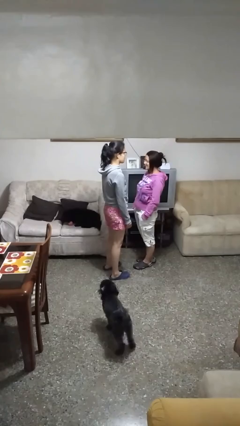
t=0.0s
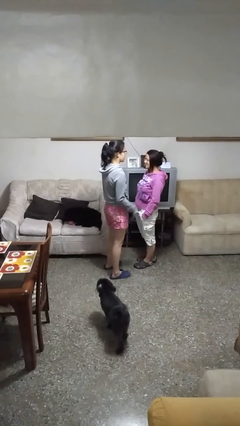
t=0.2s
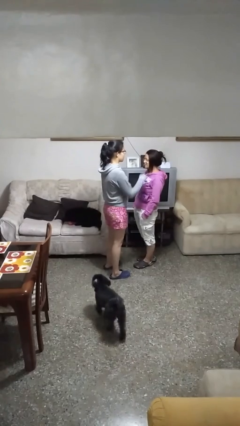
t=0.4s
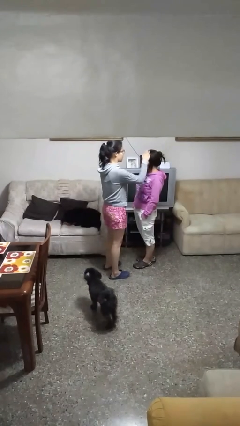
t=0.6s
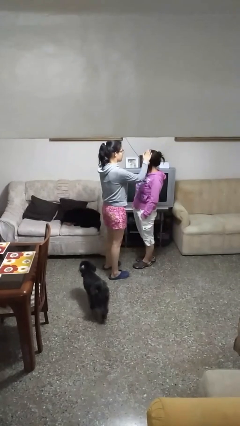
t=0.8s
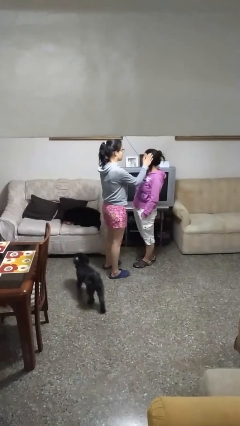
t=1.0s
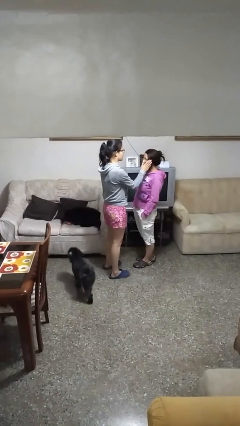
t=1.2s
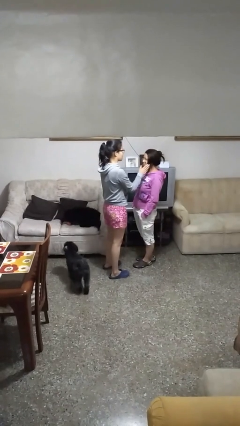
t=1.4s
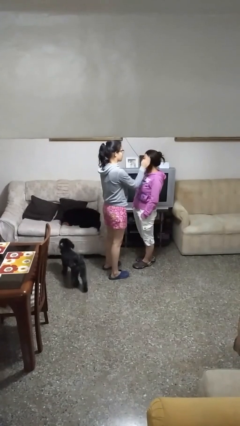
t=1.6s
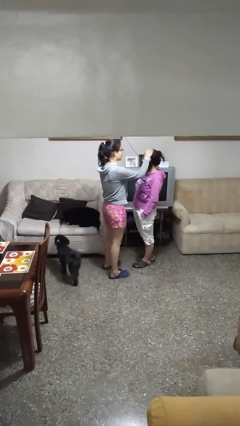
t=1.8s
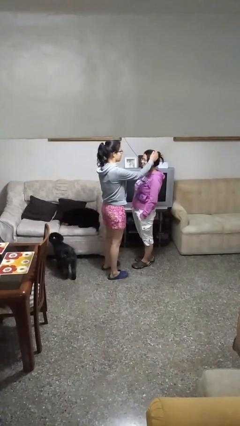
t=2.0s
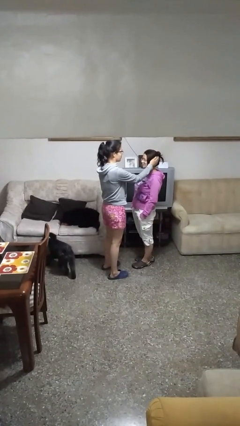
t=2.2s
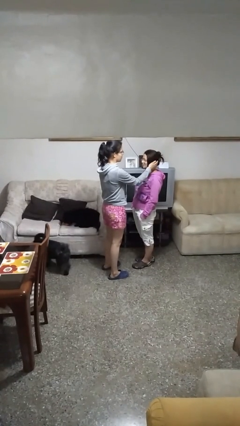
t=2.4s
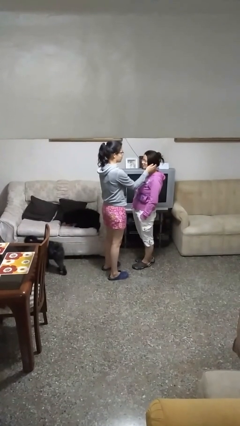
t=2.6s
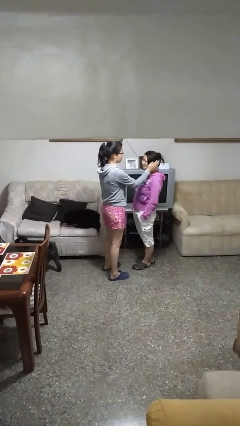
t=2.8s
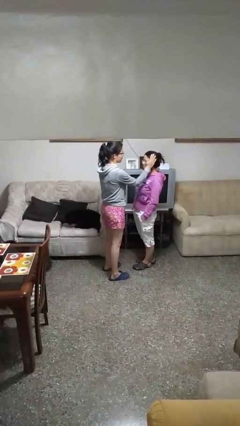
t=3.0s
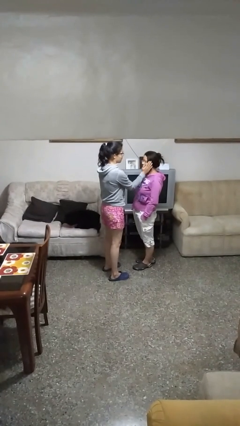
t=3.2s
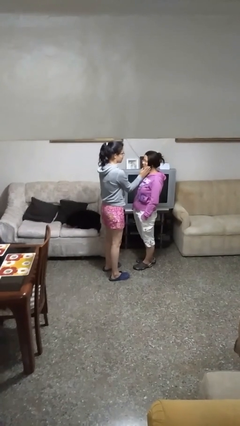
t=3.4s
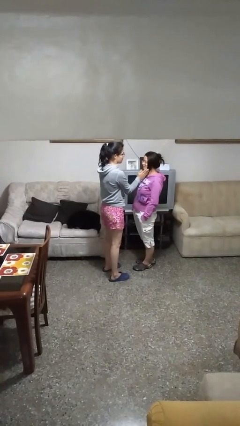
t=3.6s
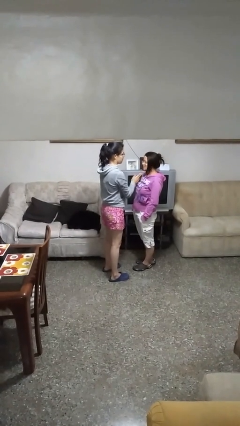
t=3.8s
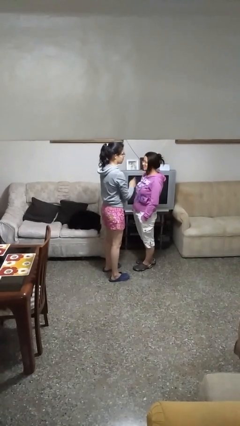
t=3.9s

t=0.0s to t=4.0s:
person touches face of person

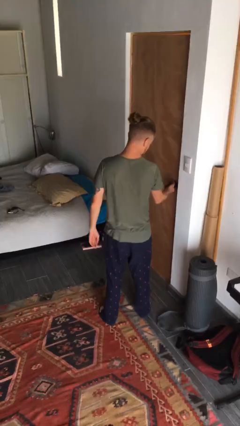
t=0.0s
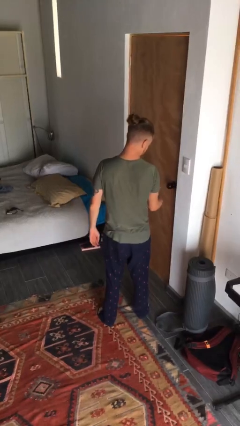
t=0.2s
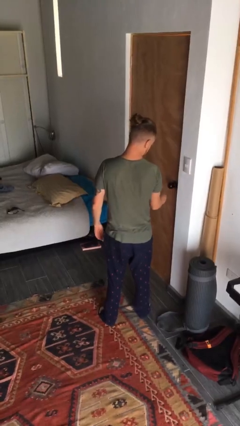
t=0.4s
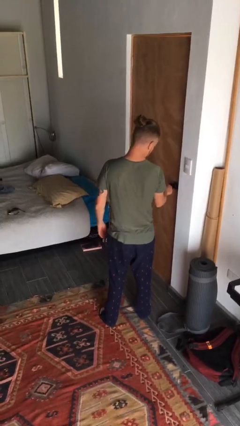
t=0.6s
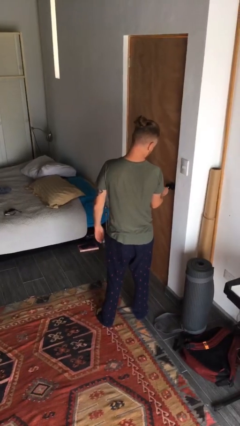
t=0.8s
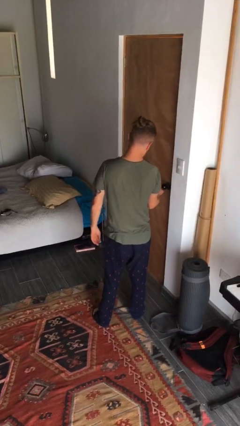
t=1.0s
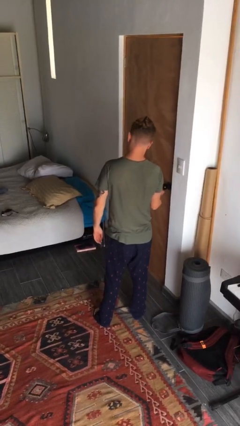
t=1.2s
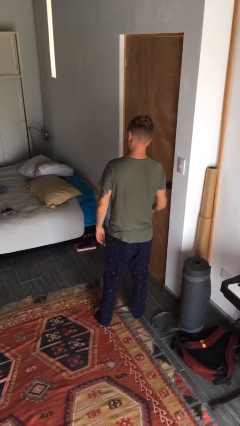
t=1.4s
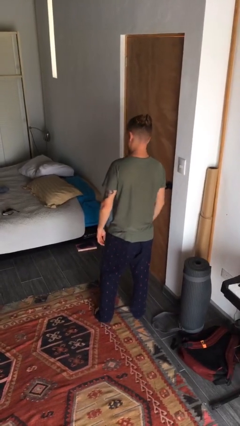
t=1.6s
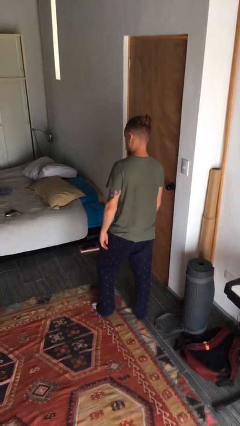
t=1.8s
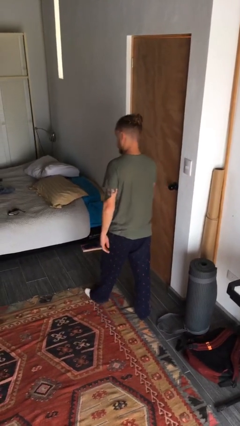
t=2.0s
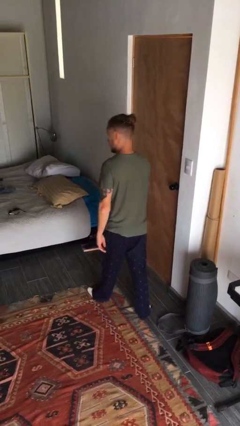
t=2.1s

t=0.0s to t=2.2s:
person locks door with keys

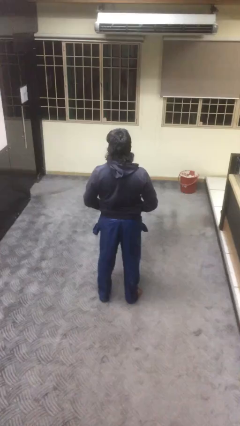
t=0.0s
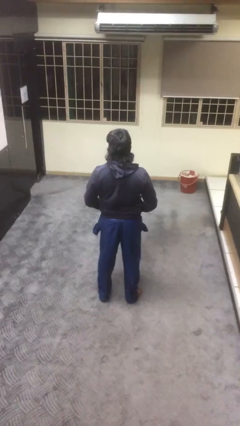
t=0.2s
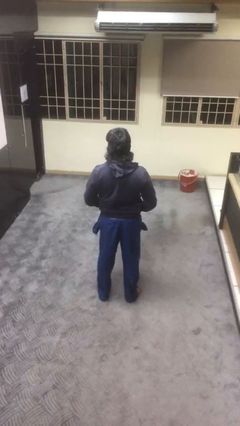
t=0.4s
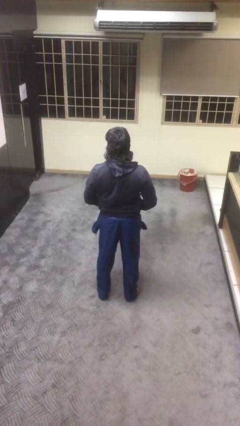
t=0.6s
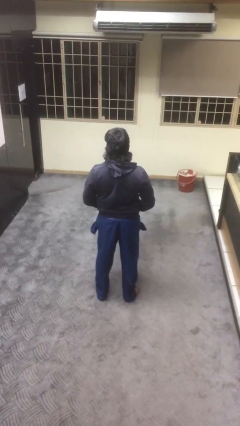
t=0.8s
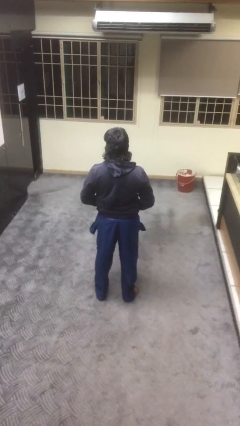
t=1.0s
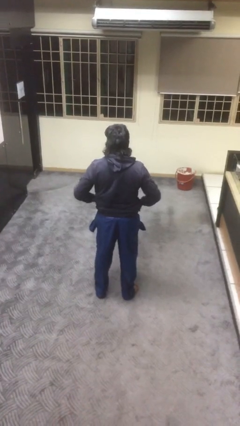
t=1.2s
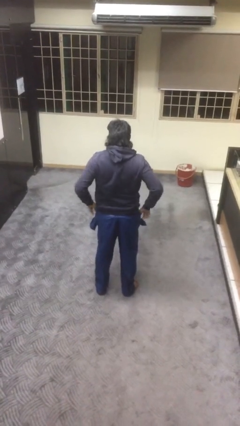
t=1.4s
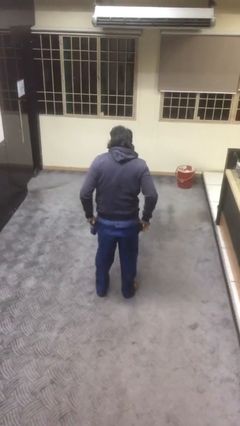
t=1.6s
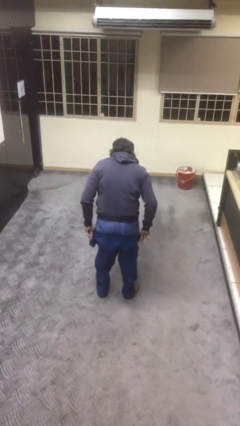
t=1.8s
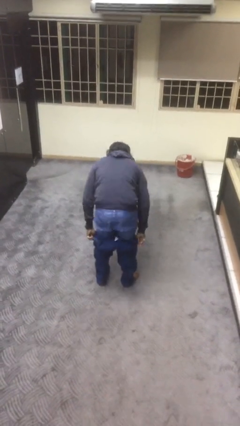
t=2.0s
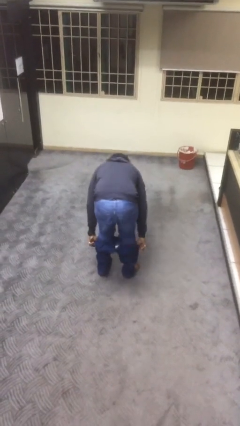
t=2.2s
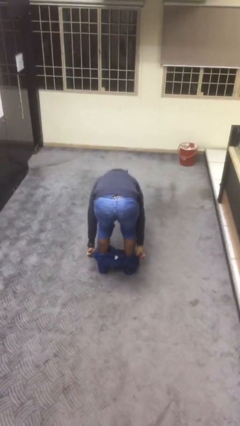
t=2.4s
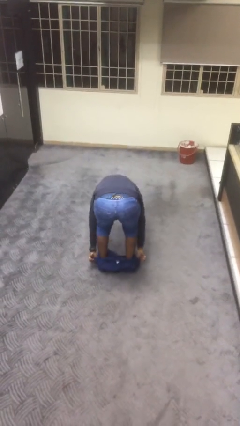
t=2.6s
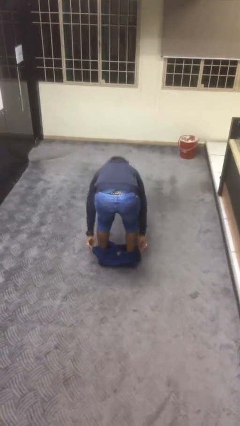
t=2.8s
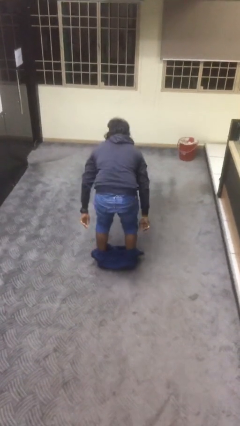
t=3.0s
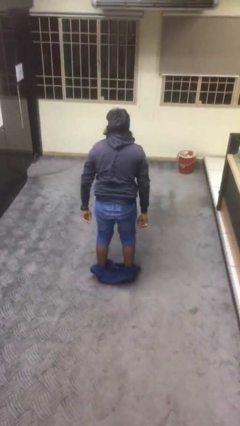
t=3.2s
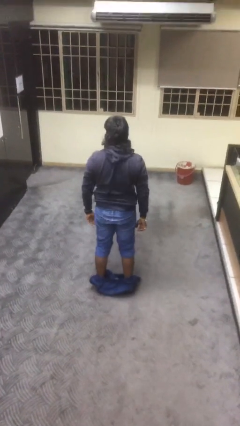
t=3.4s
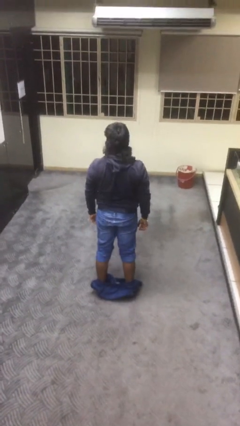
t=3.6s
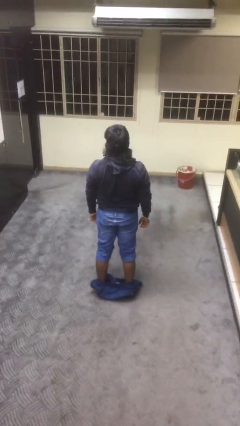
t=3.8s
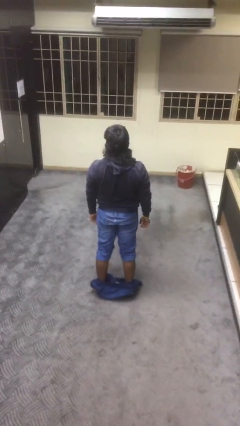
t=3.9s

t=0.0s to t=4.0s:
person takes off pants

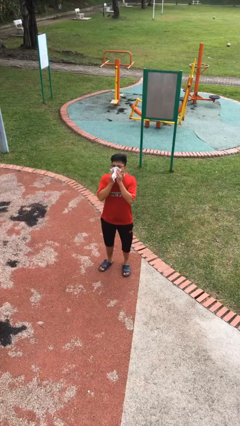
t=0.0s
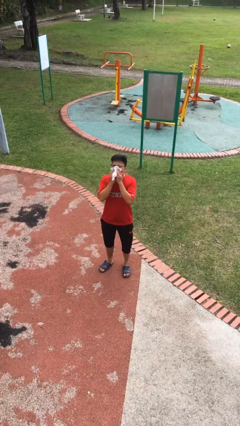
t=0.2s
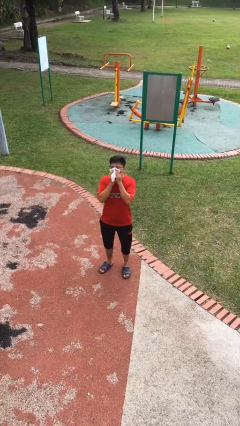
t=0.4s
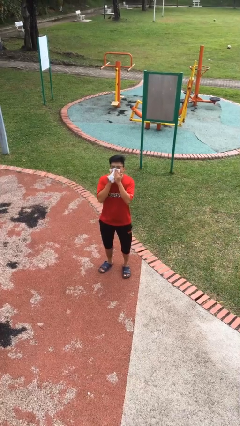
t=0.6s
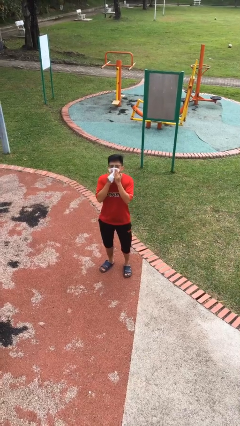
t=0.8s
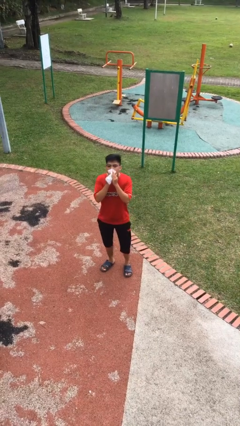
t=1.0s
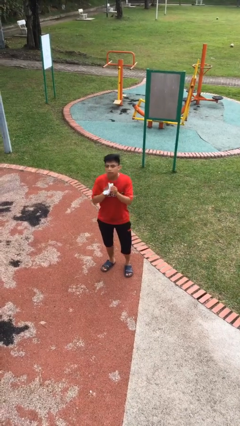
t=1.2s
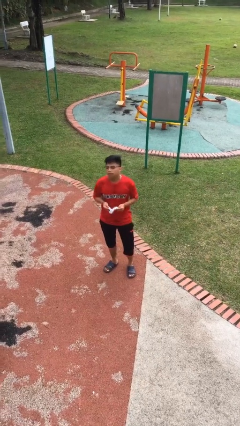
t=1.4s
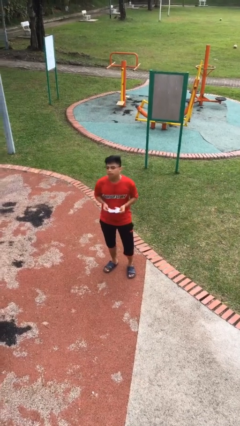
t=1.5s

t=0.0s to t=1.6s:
person blows nose

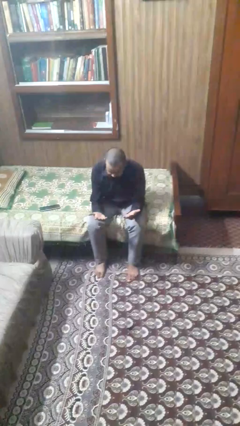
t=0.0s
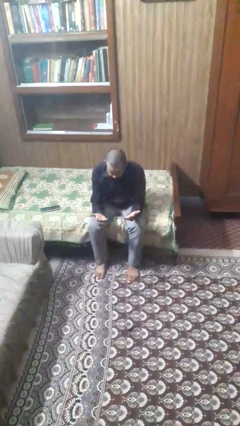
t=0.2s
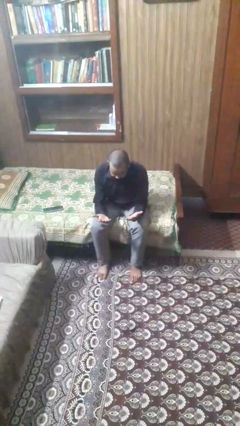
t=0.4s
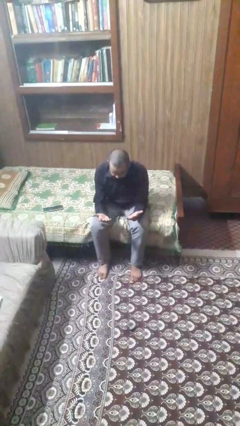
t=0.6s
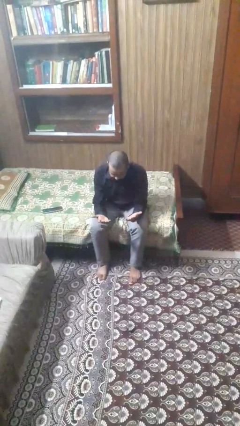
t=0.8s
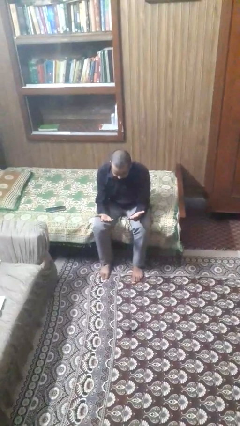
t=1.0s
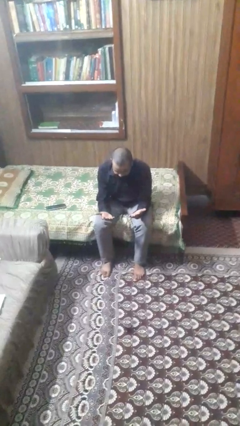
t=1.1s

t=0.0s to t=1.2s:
person looks at hands in lap

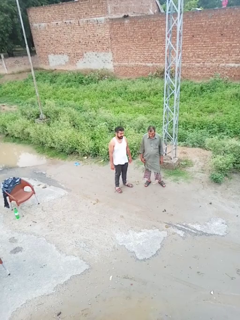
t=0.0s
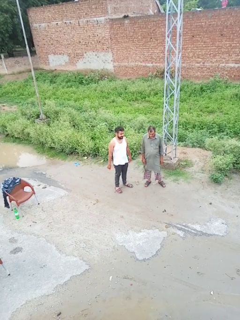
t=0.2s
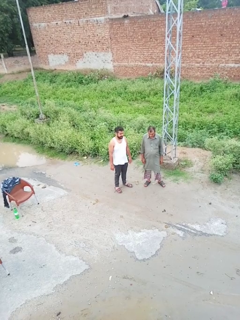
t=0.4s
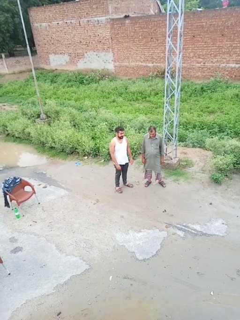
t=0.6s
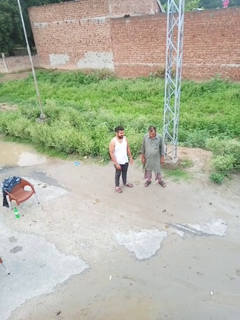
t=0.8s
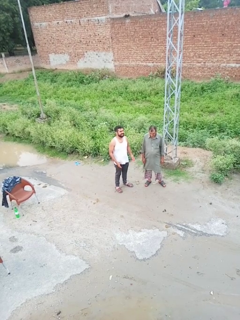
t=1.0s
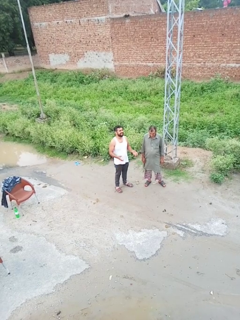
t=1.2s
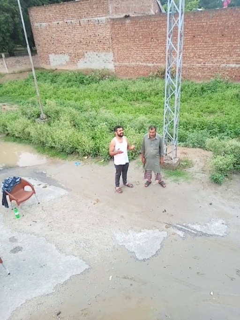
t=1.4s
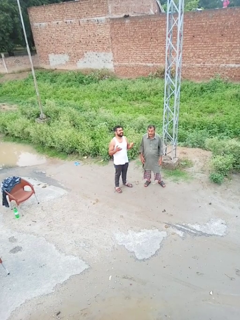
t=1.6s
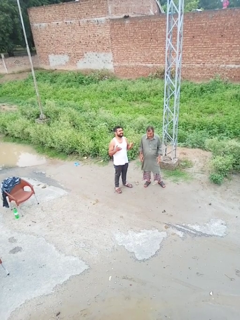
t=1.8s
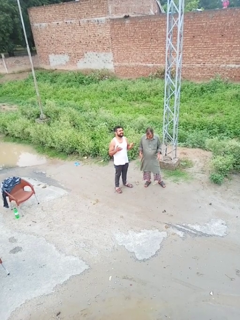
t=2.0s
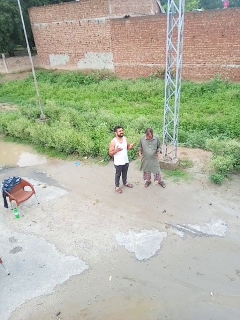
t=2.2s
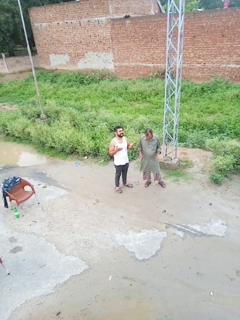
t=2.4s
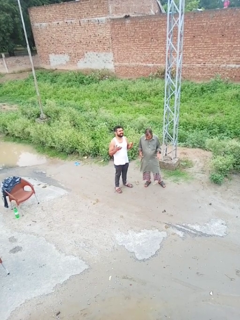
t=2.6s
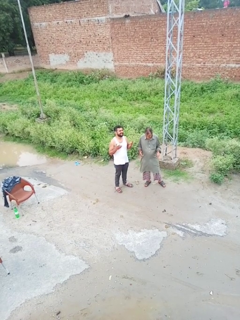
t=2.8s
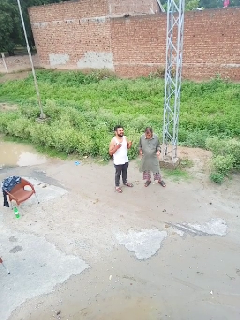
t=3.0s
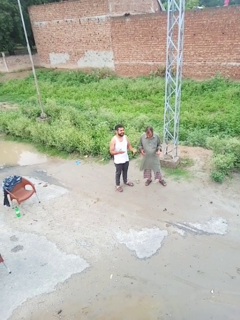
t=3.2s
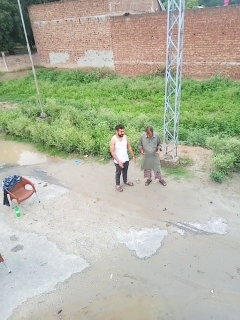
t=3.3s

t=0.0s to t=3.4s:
person laughs with person

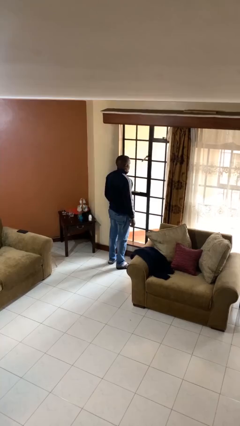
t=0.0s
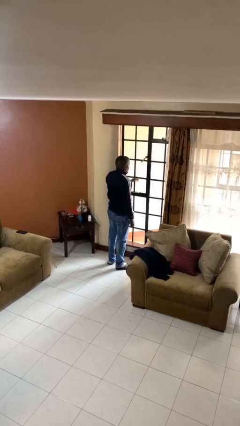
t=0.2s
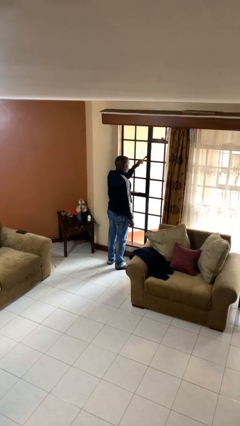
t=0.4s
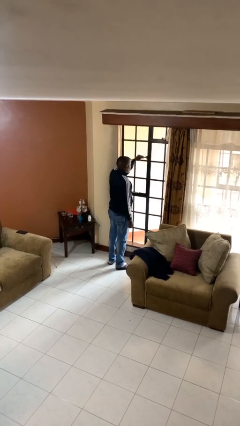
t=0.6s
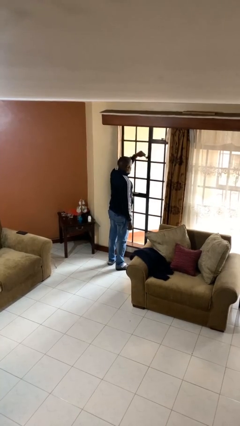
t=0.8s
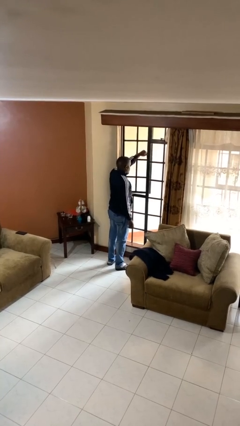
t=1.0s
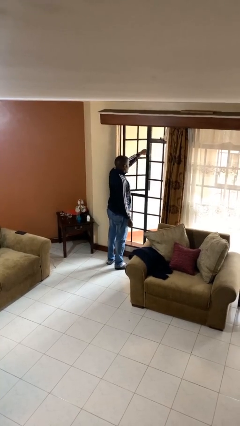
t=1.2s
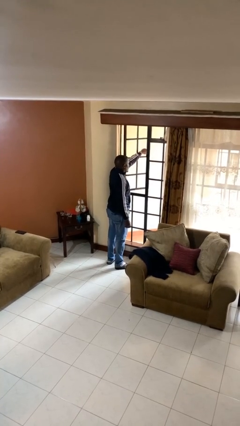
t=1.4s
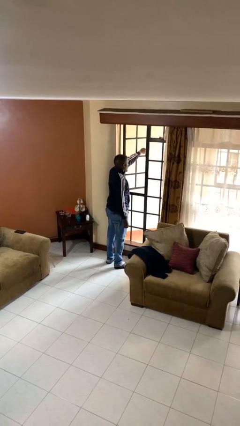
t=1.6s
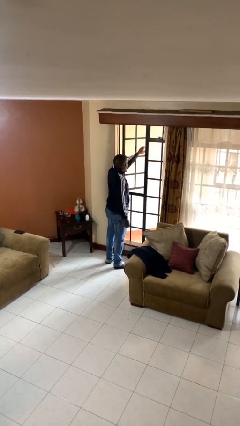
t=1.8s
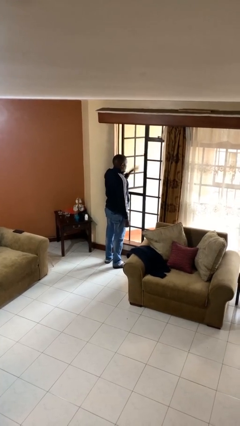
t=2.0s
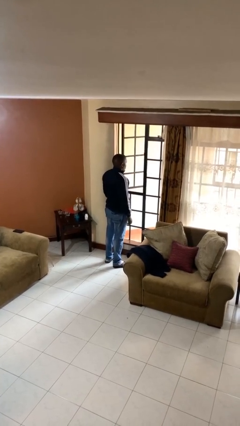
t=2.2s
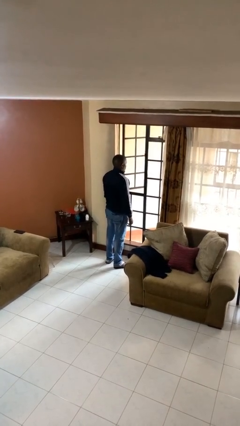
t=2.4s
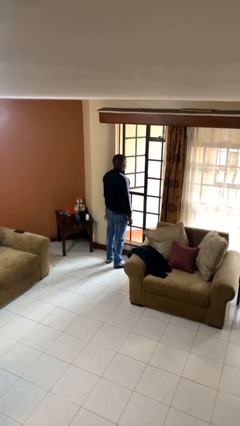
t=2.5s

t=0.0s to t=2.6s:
person opens home window
